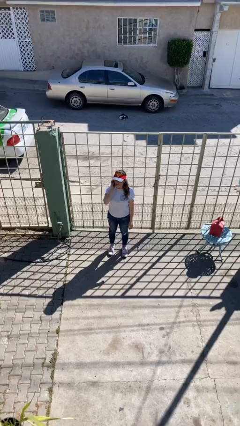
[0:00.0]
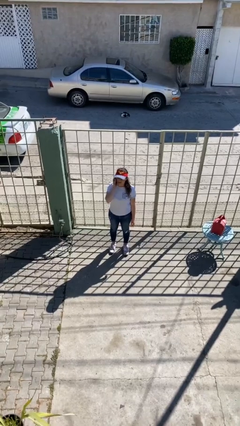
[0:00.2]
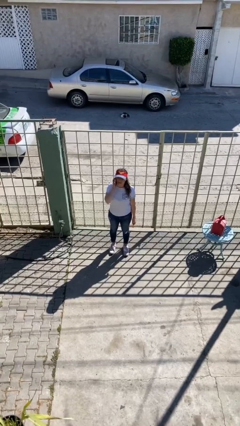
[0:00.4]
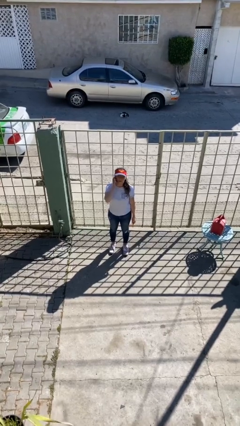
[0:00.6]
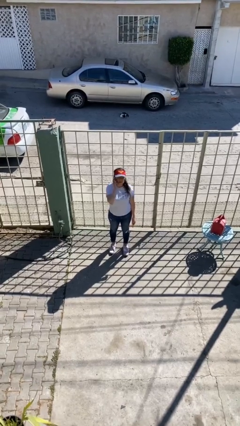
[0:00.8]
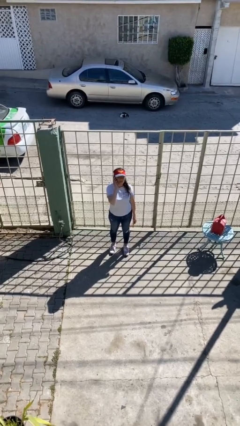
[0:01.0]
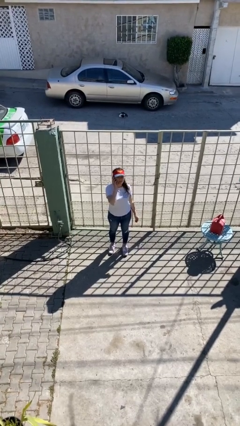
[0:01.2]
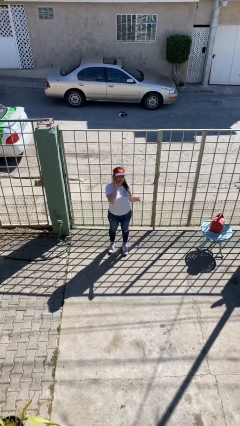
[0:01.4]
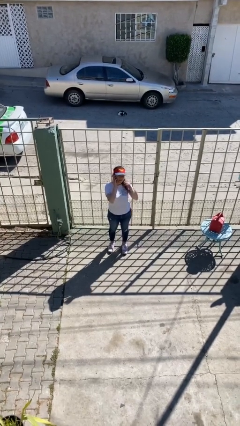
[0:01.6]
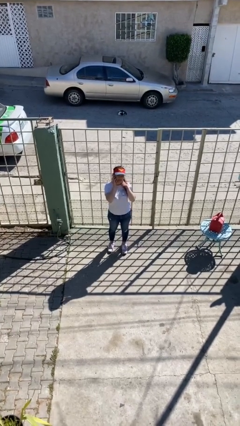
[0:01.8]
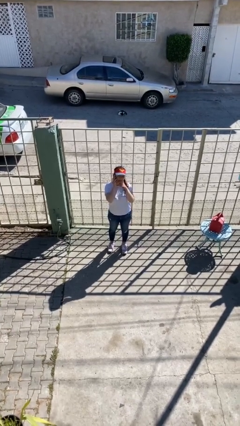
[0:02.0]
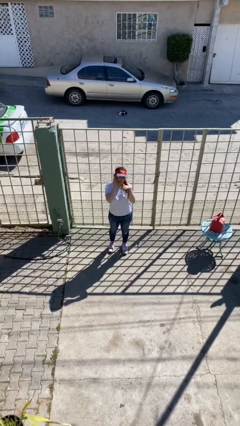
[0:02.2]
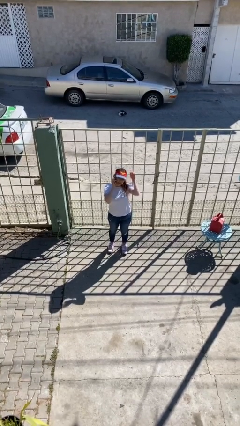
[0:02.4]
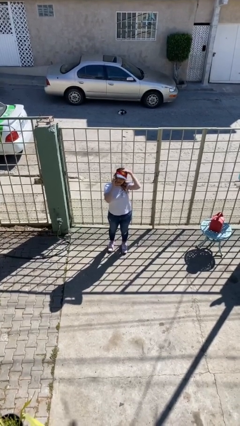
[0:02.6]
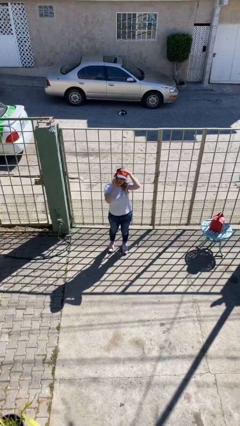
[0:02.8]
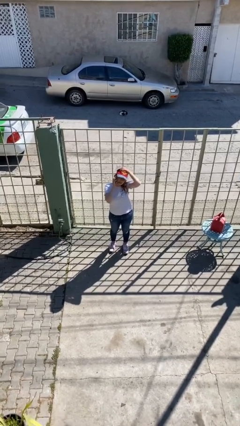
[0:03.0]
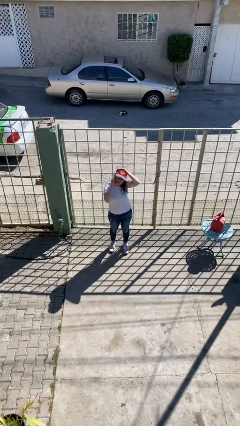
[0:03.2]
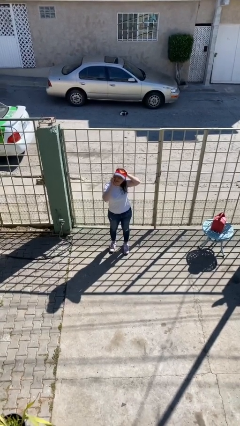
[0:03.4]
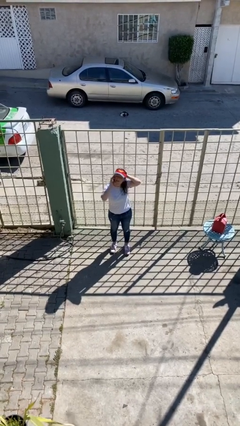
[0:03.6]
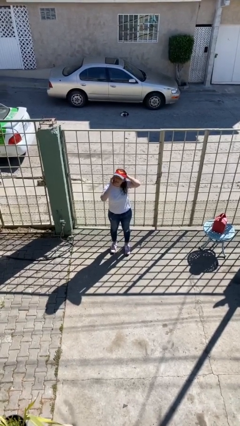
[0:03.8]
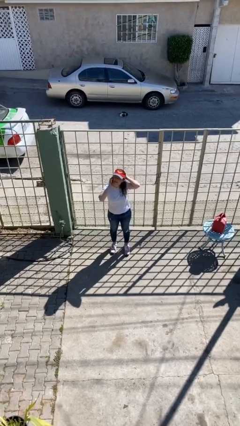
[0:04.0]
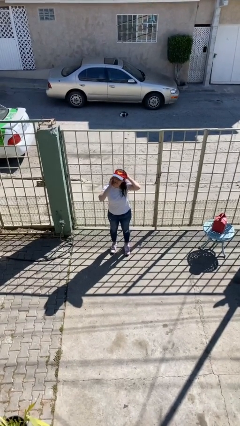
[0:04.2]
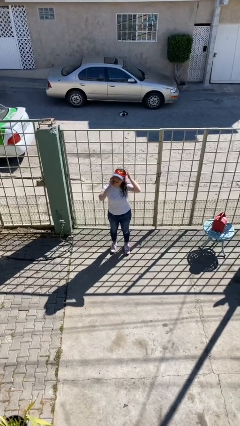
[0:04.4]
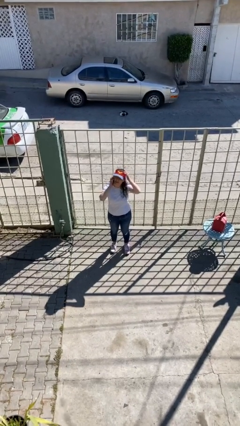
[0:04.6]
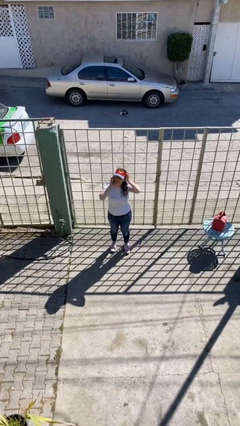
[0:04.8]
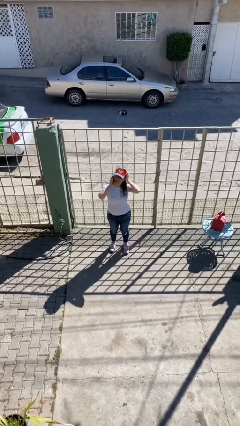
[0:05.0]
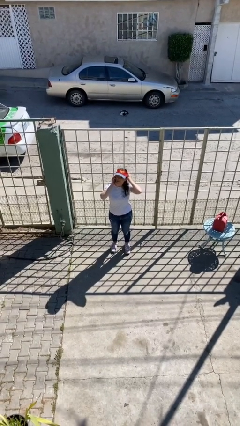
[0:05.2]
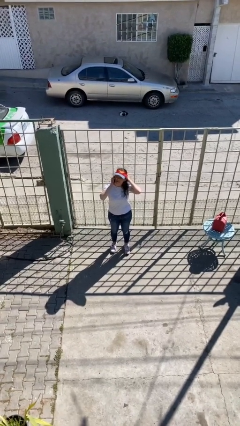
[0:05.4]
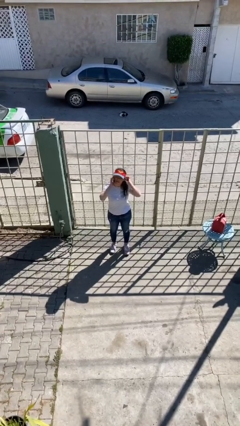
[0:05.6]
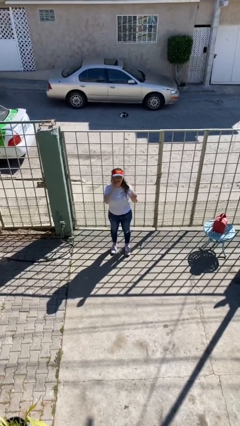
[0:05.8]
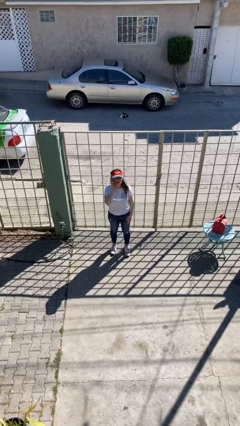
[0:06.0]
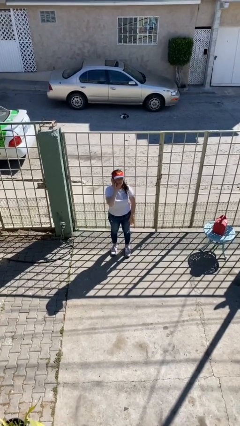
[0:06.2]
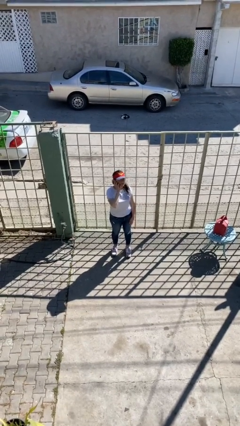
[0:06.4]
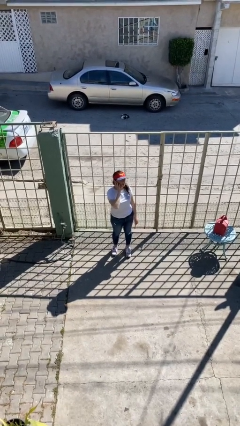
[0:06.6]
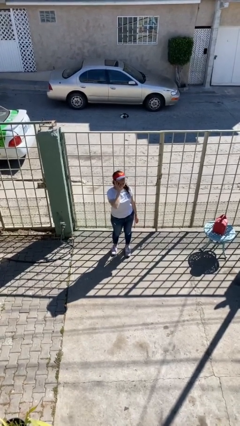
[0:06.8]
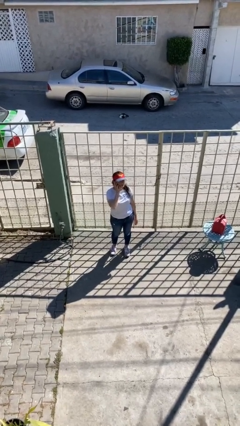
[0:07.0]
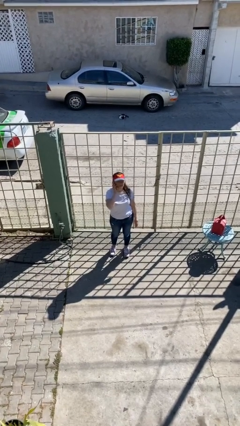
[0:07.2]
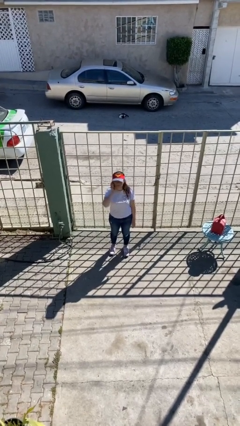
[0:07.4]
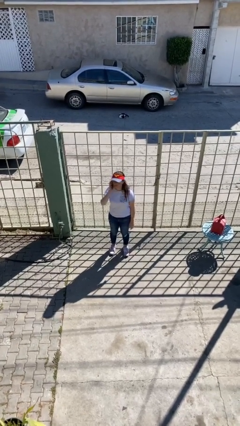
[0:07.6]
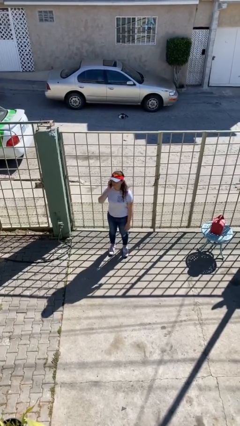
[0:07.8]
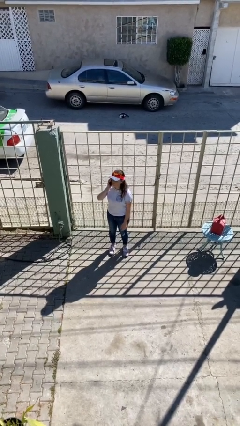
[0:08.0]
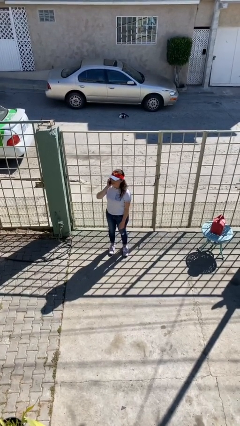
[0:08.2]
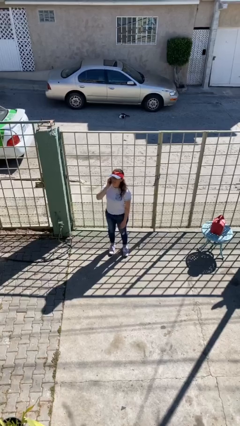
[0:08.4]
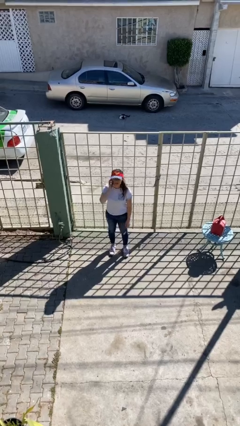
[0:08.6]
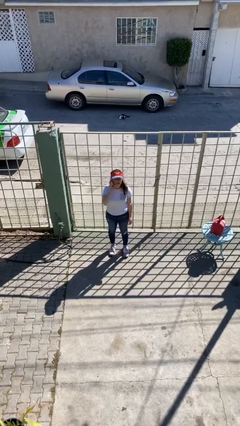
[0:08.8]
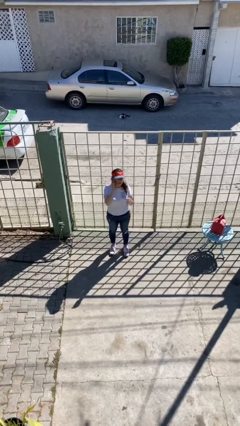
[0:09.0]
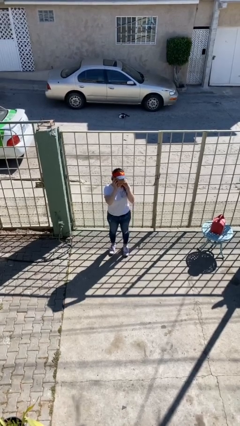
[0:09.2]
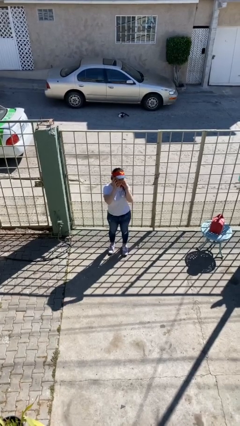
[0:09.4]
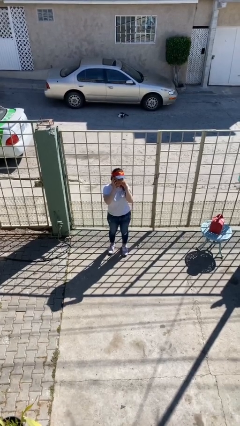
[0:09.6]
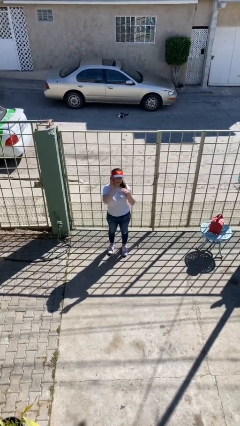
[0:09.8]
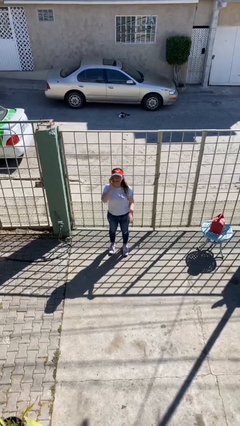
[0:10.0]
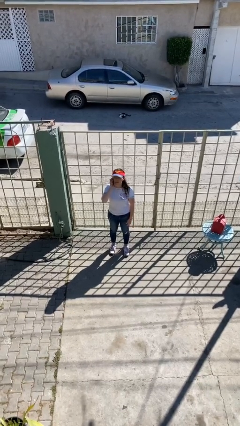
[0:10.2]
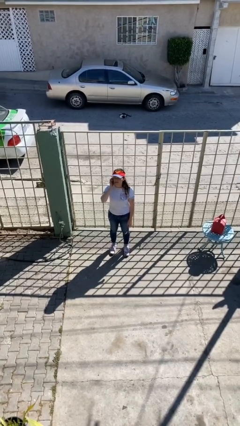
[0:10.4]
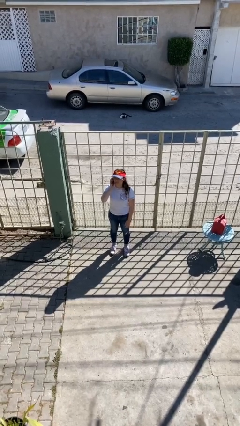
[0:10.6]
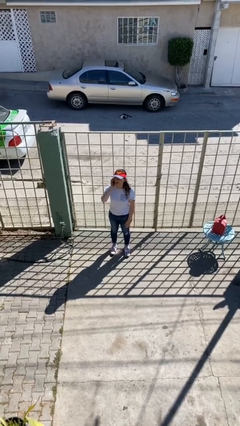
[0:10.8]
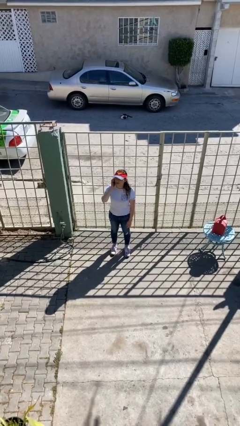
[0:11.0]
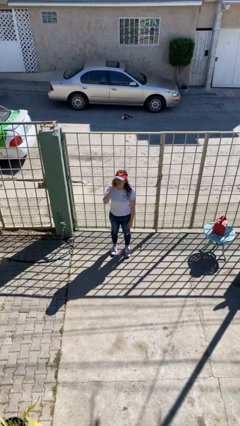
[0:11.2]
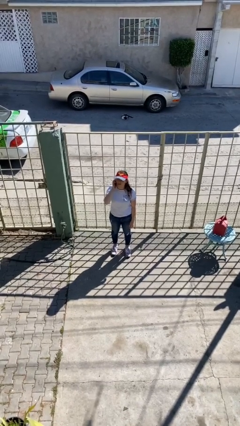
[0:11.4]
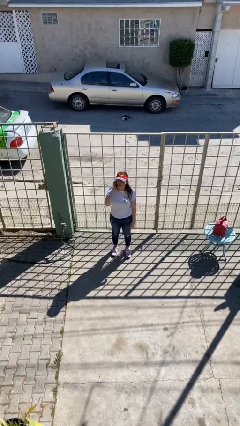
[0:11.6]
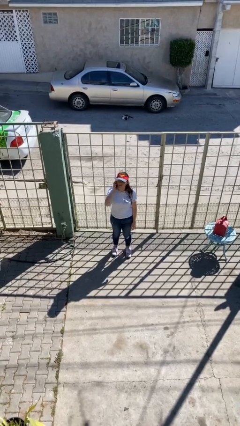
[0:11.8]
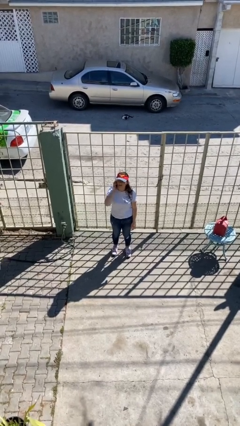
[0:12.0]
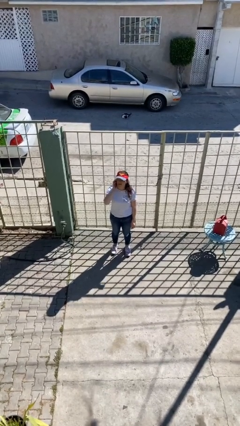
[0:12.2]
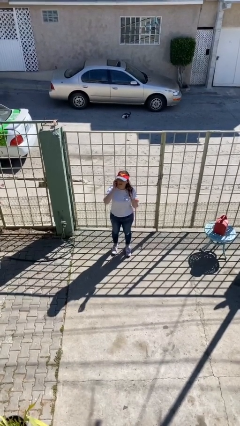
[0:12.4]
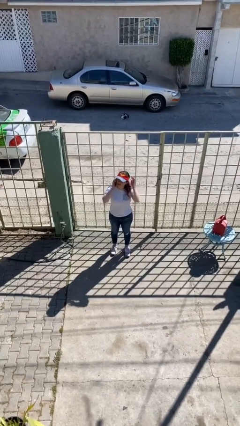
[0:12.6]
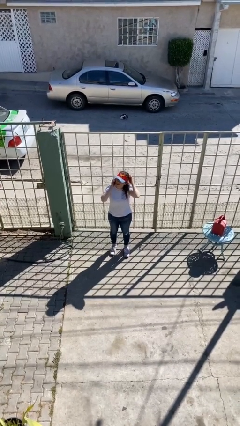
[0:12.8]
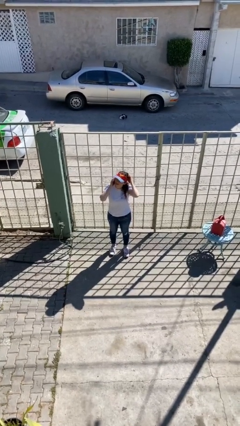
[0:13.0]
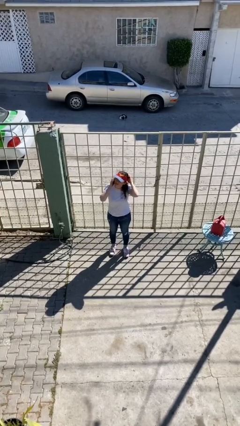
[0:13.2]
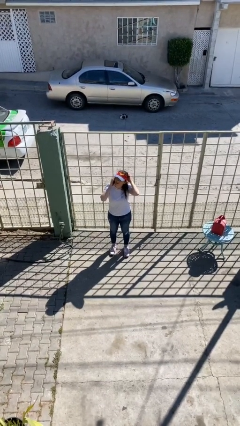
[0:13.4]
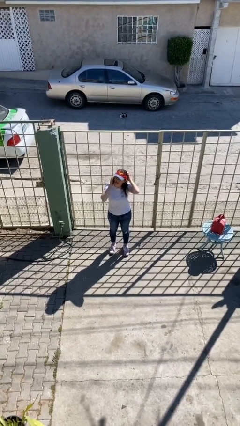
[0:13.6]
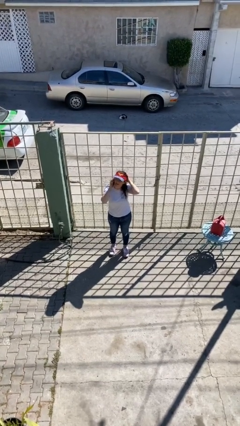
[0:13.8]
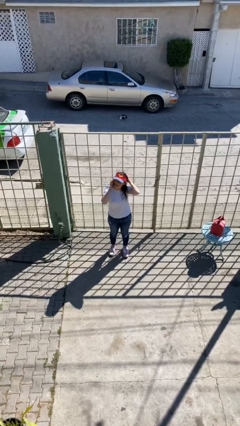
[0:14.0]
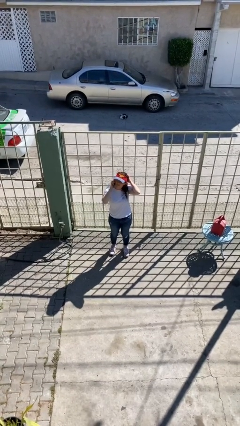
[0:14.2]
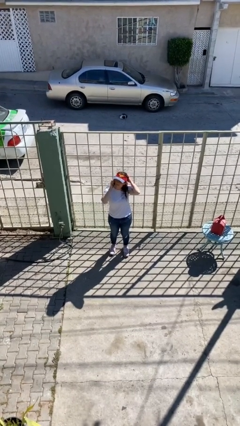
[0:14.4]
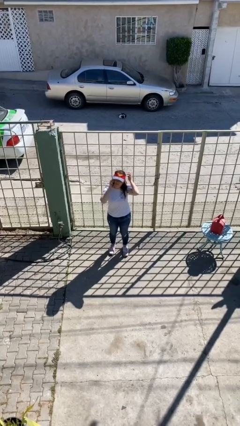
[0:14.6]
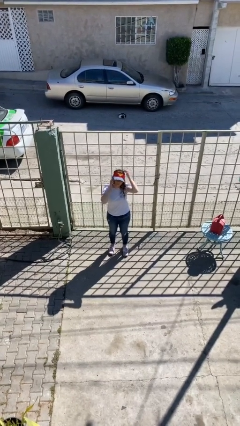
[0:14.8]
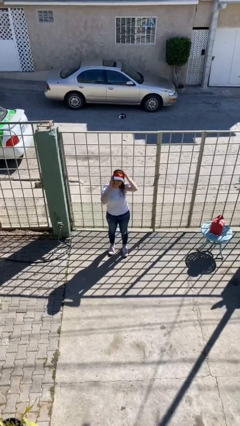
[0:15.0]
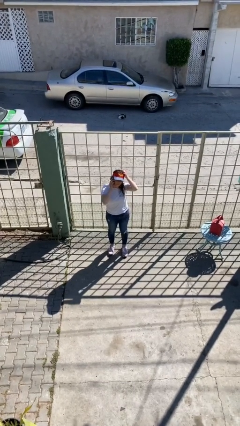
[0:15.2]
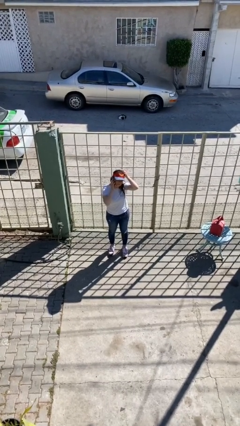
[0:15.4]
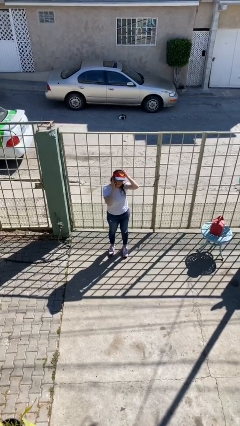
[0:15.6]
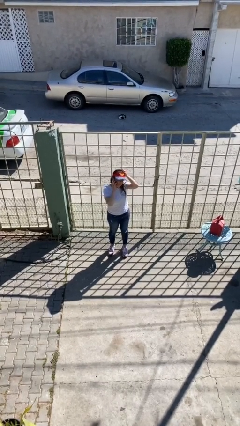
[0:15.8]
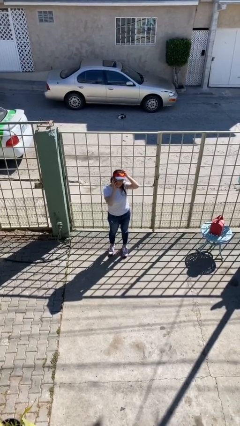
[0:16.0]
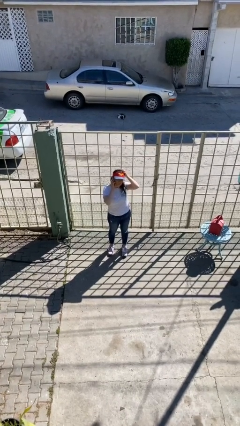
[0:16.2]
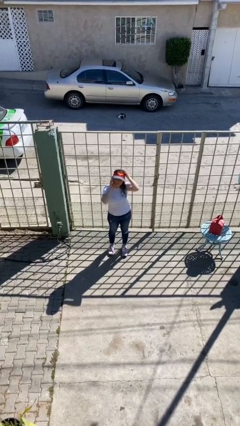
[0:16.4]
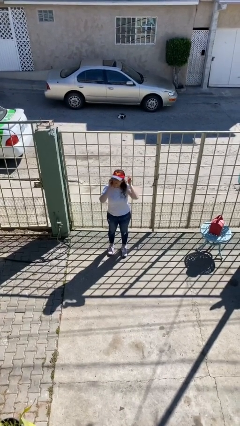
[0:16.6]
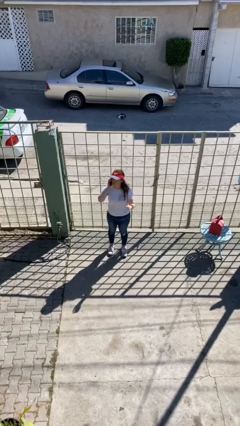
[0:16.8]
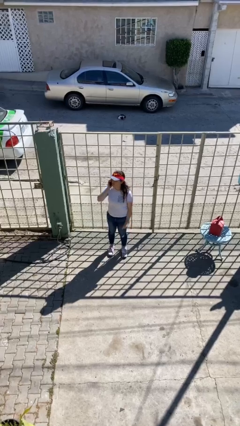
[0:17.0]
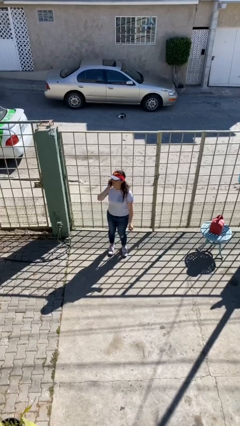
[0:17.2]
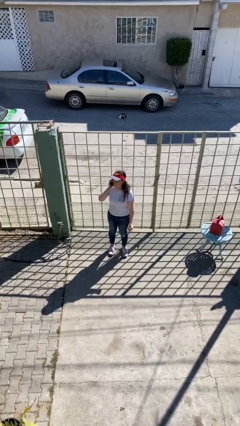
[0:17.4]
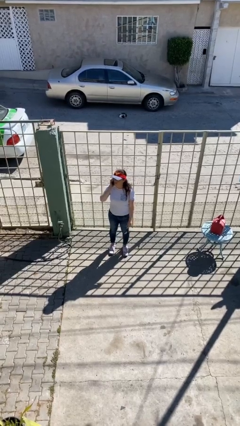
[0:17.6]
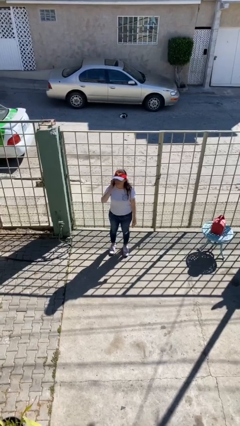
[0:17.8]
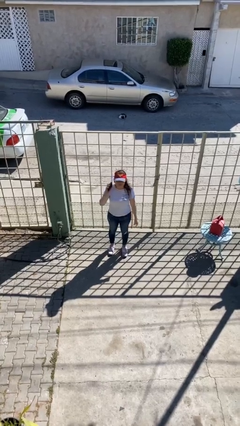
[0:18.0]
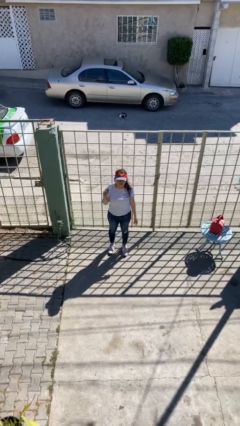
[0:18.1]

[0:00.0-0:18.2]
person talks on phone
